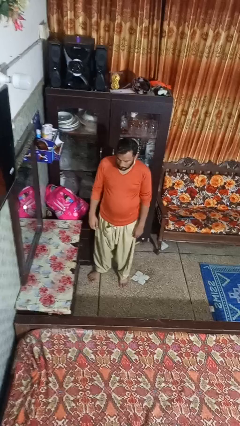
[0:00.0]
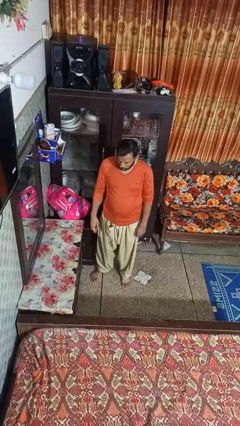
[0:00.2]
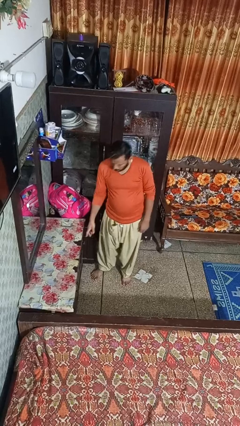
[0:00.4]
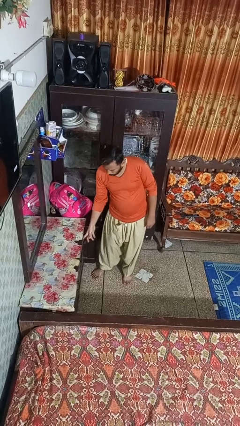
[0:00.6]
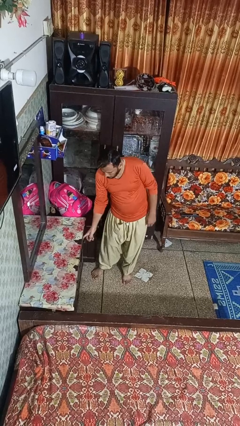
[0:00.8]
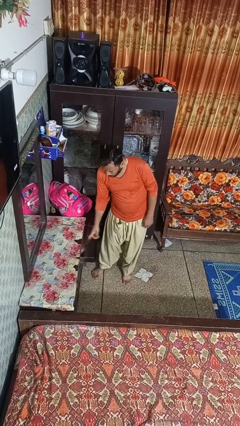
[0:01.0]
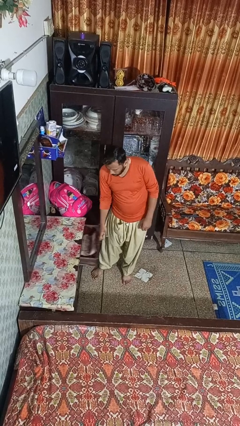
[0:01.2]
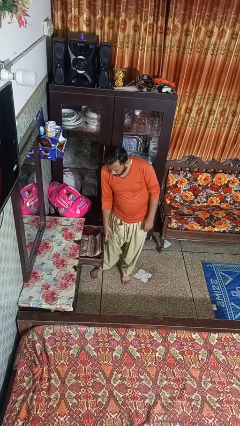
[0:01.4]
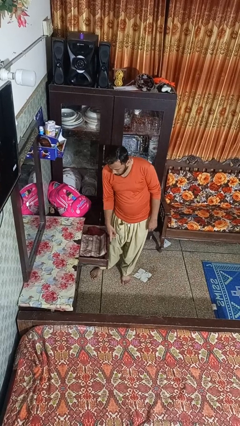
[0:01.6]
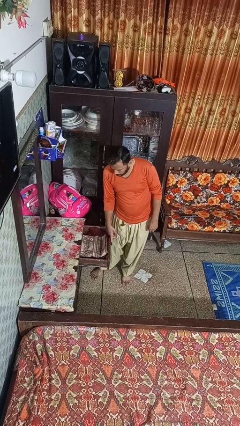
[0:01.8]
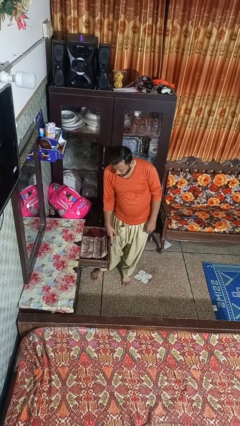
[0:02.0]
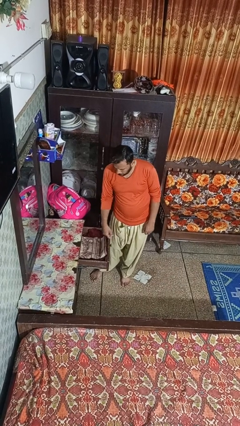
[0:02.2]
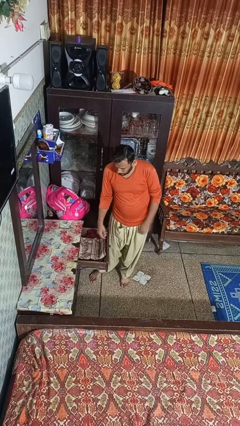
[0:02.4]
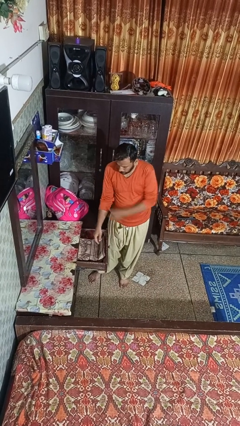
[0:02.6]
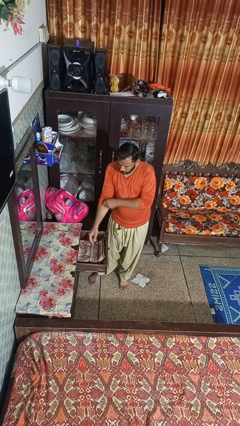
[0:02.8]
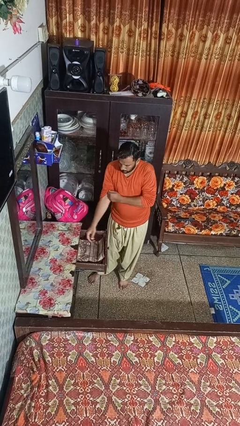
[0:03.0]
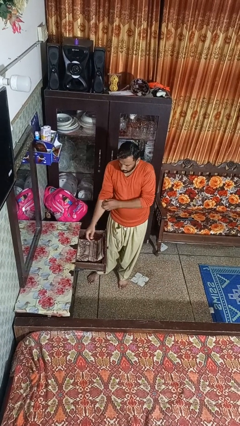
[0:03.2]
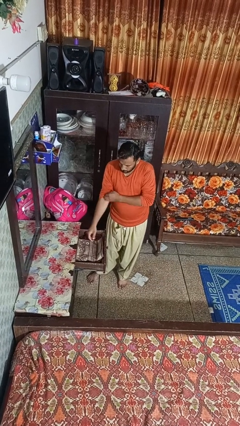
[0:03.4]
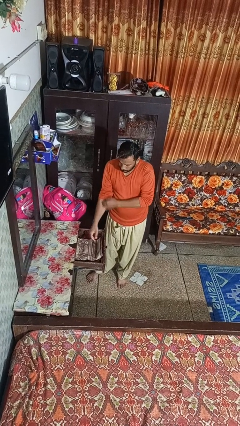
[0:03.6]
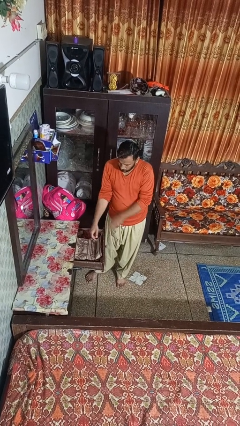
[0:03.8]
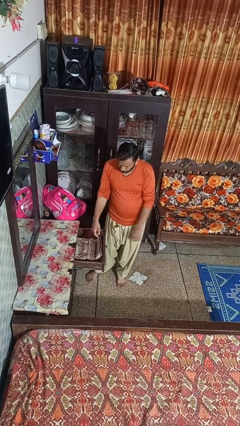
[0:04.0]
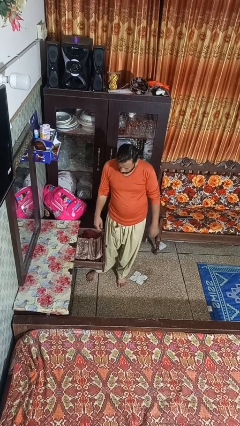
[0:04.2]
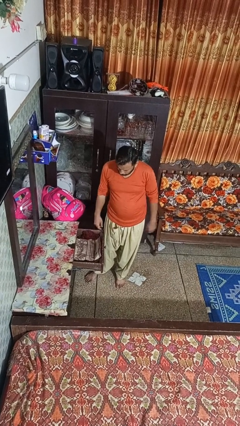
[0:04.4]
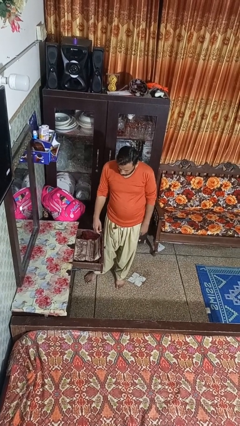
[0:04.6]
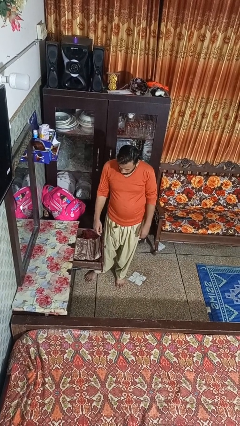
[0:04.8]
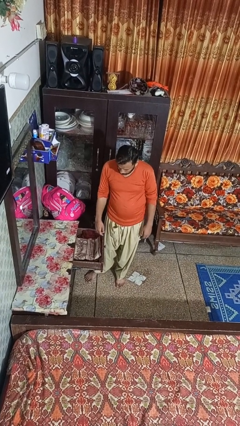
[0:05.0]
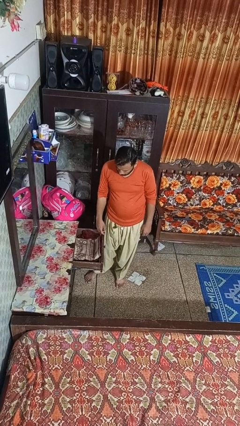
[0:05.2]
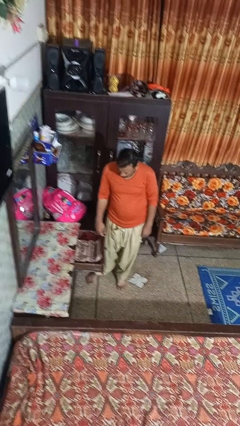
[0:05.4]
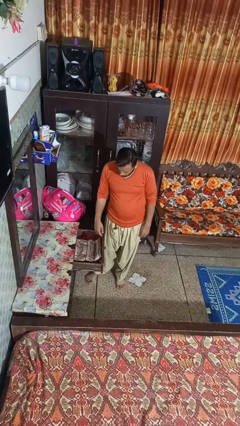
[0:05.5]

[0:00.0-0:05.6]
person opens dresser drawer

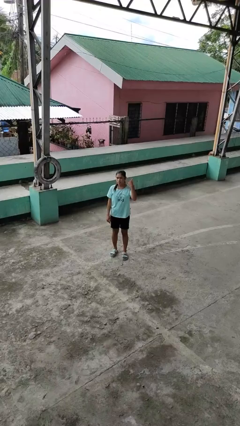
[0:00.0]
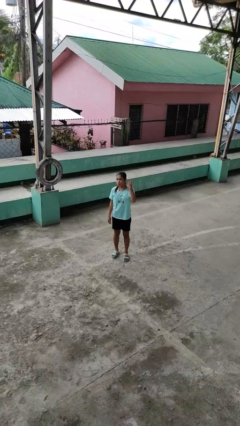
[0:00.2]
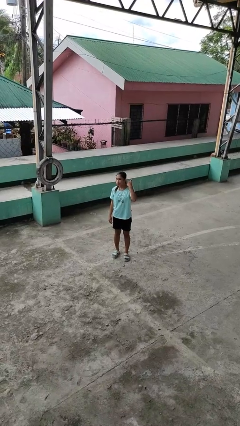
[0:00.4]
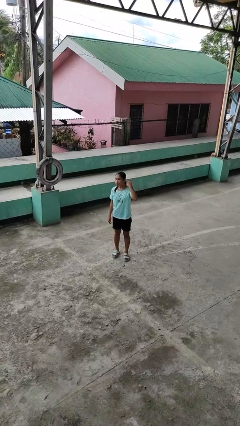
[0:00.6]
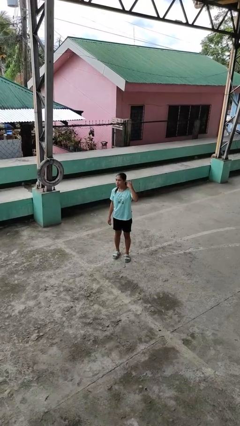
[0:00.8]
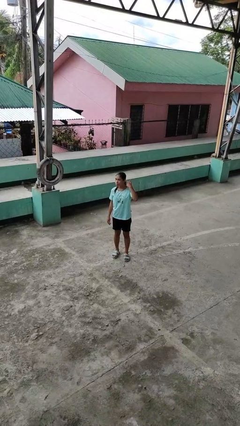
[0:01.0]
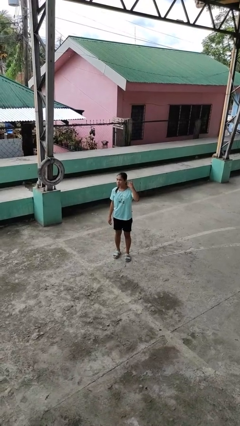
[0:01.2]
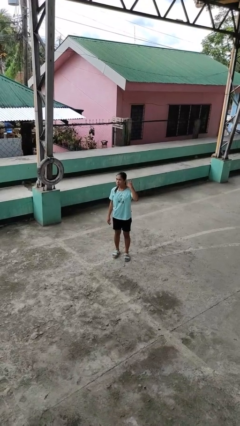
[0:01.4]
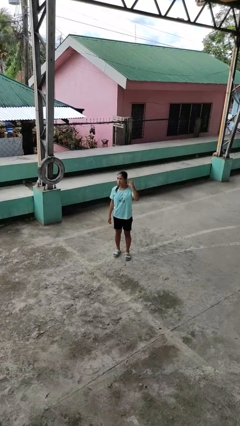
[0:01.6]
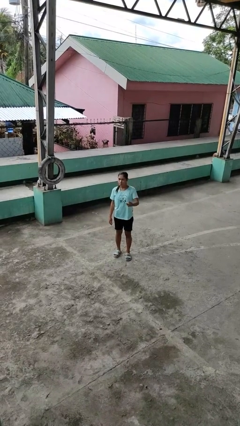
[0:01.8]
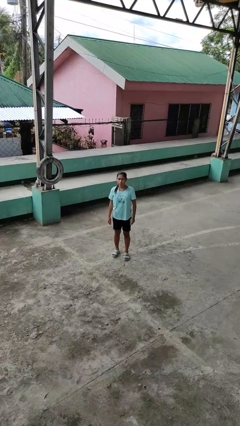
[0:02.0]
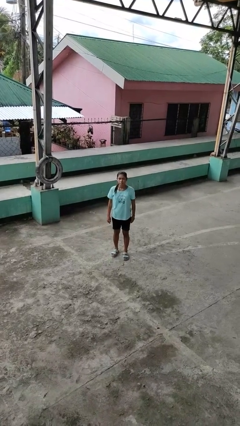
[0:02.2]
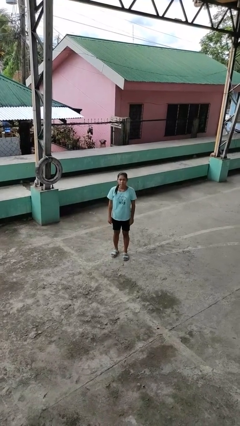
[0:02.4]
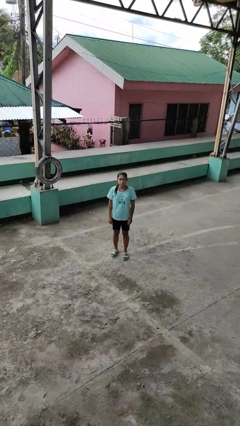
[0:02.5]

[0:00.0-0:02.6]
person gestures listen closely

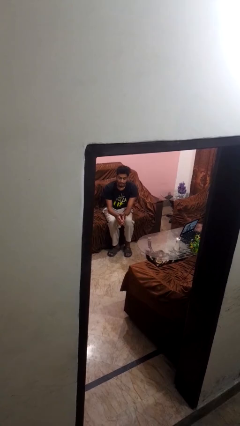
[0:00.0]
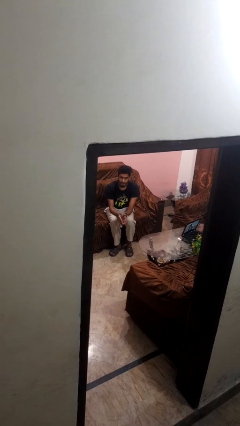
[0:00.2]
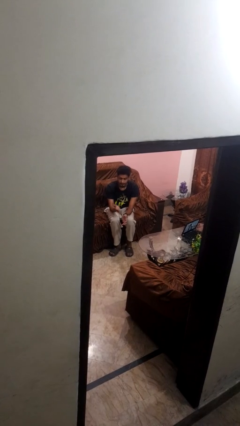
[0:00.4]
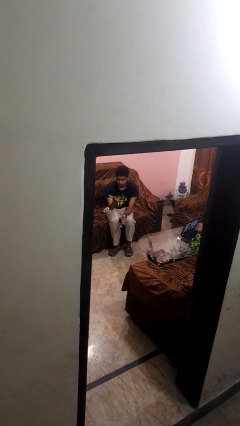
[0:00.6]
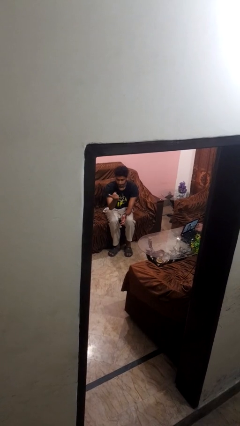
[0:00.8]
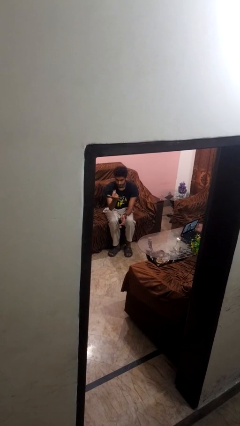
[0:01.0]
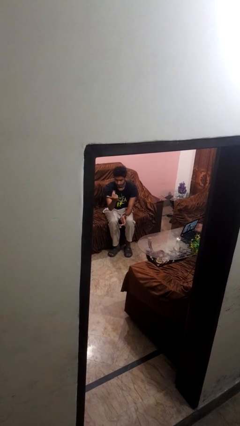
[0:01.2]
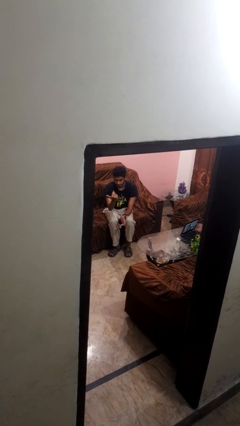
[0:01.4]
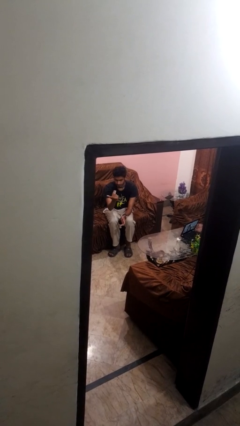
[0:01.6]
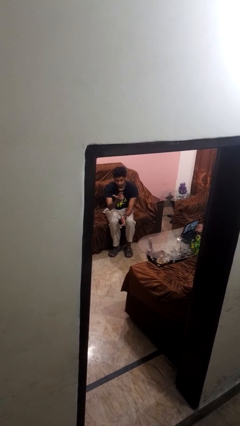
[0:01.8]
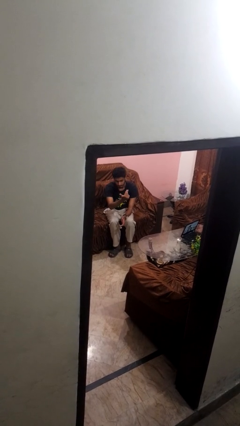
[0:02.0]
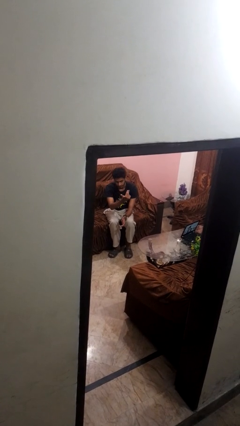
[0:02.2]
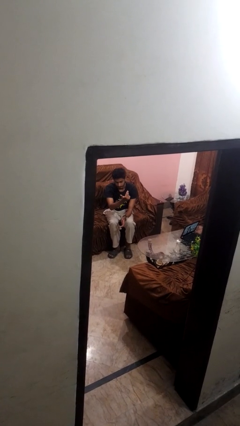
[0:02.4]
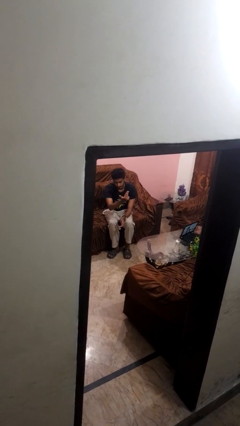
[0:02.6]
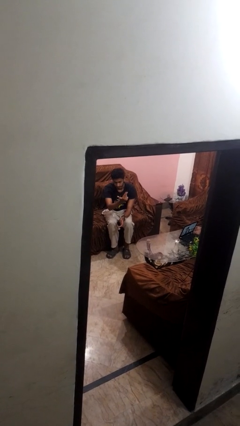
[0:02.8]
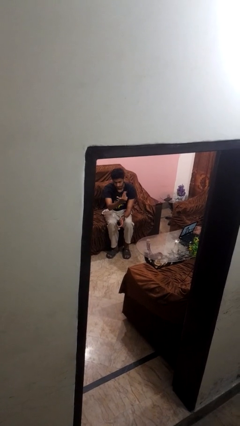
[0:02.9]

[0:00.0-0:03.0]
person gestures come here

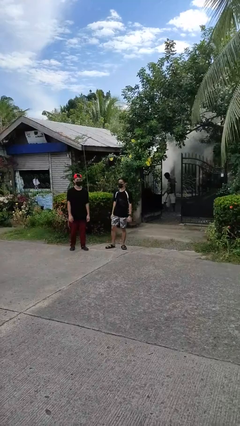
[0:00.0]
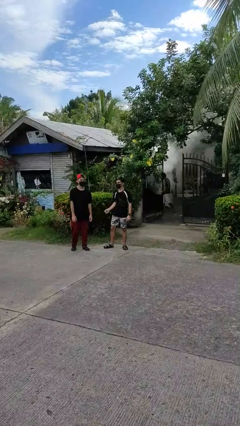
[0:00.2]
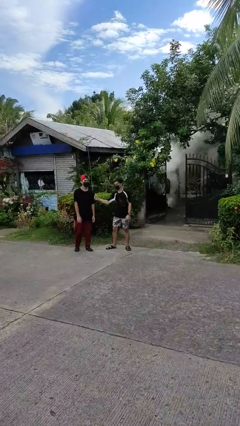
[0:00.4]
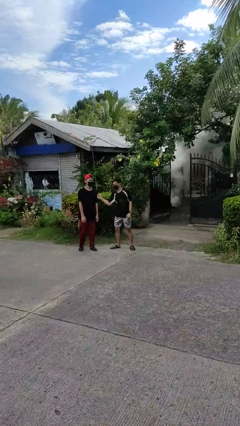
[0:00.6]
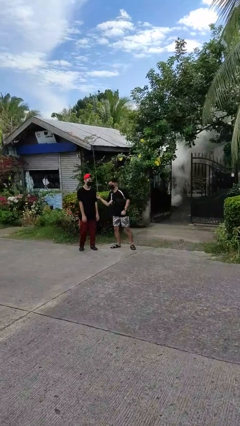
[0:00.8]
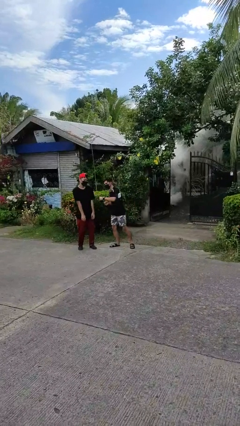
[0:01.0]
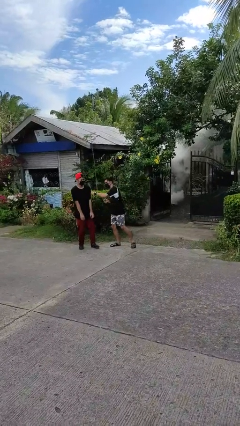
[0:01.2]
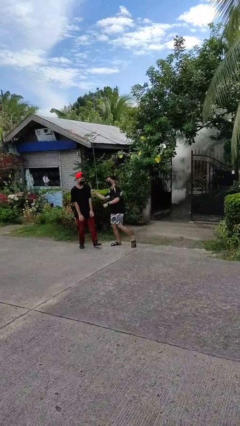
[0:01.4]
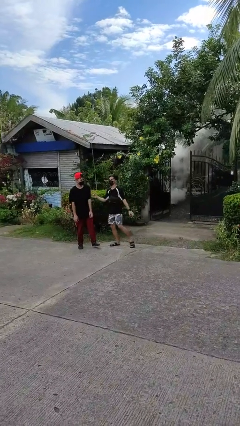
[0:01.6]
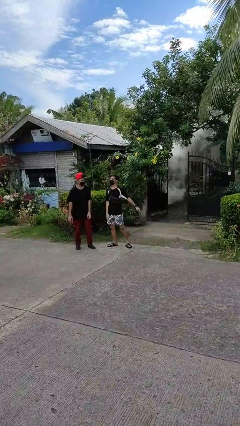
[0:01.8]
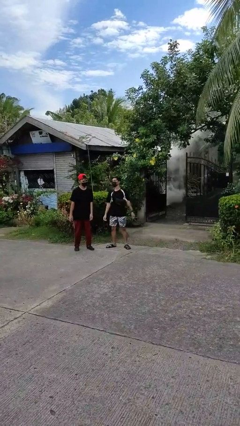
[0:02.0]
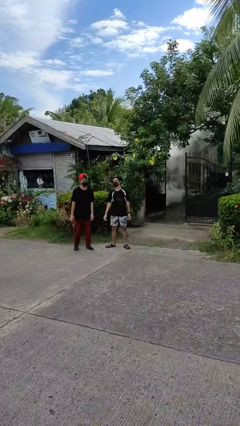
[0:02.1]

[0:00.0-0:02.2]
person pounds shoulders of person

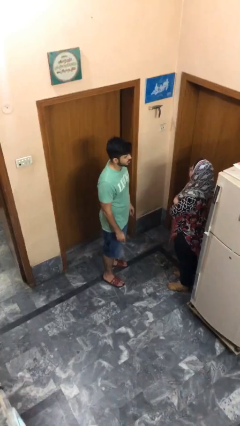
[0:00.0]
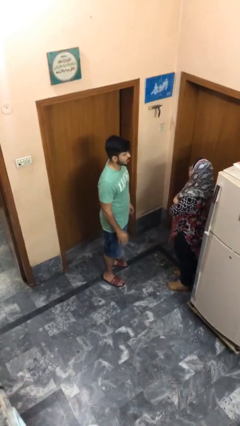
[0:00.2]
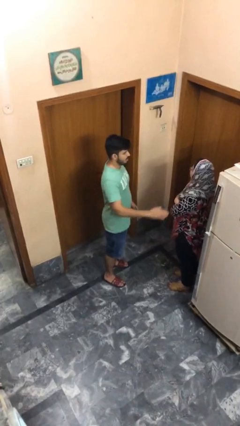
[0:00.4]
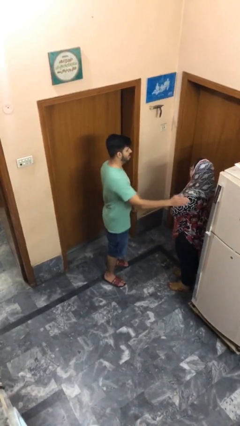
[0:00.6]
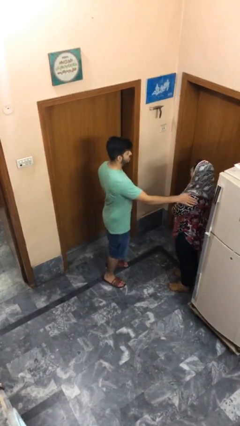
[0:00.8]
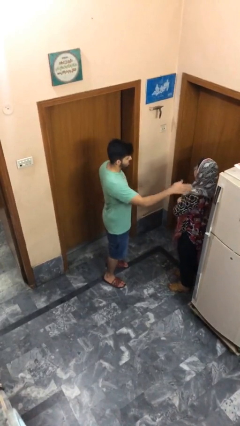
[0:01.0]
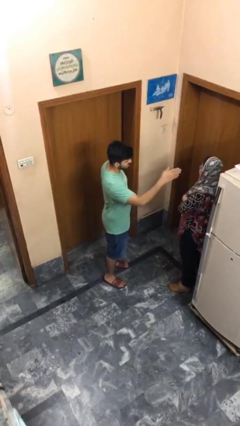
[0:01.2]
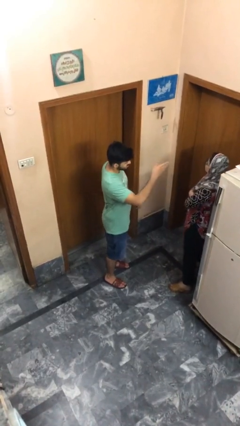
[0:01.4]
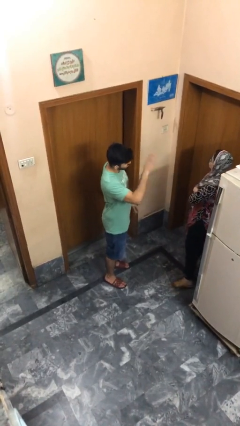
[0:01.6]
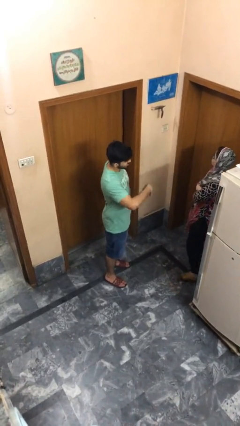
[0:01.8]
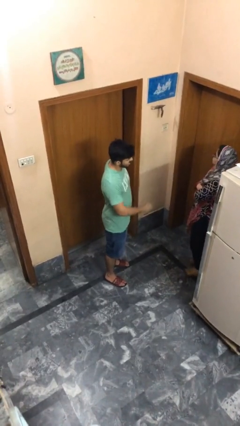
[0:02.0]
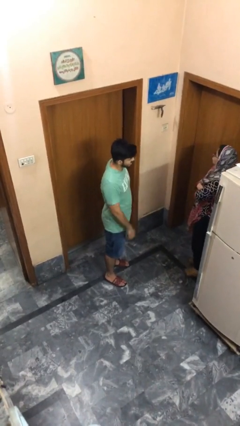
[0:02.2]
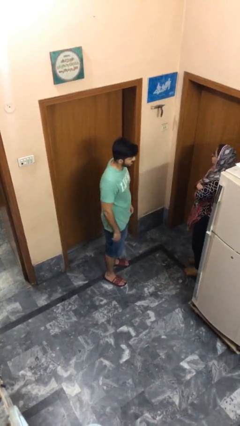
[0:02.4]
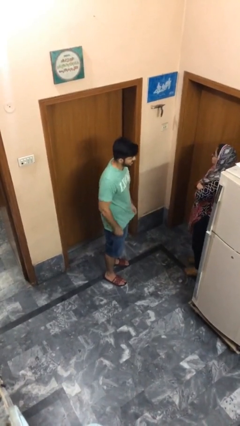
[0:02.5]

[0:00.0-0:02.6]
person shoves person

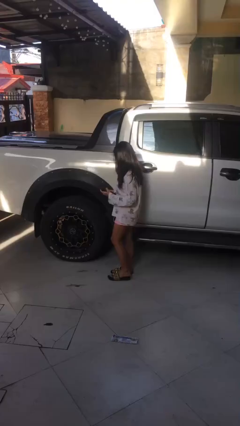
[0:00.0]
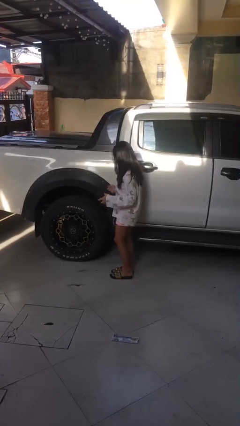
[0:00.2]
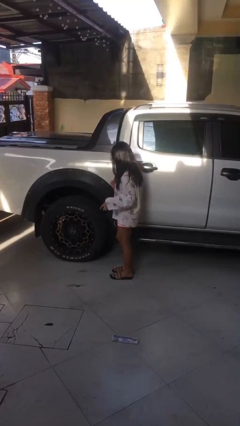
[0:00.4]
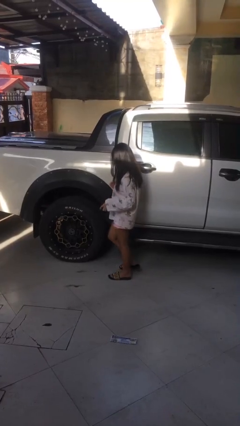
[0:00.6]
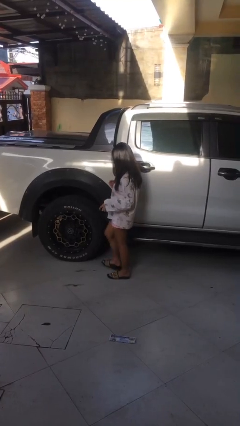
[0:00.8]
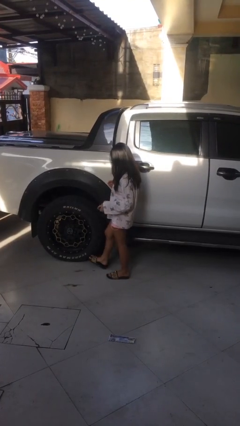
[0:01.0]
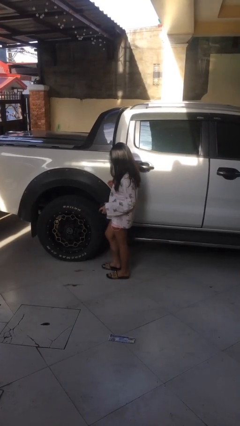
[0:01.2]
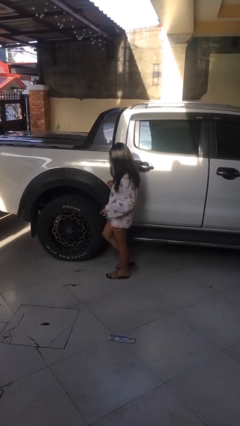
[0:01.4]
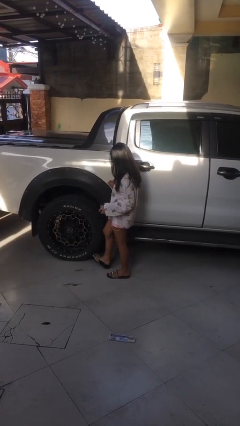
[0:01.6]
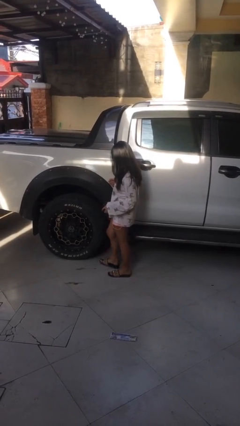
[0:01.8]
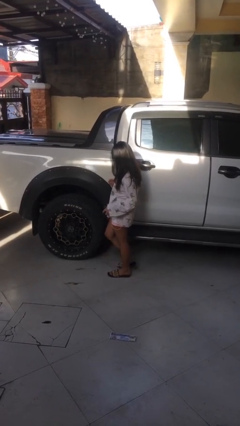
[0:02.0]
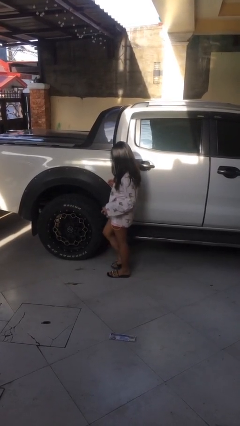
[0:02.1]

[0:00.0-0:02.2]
person kicks car tires
